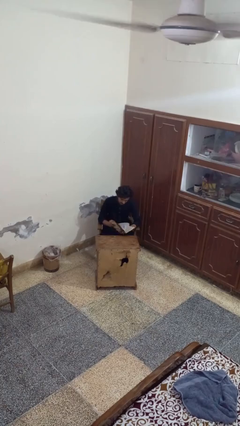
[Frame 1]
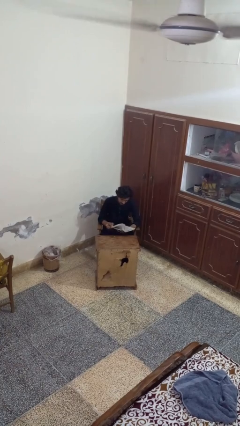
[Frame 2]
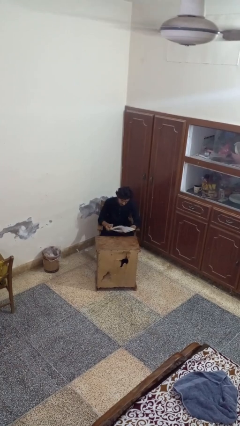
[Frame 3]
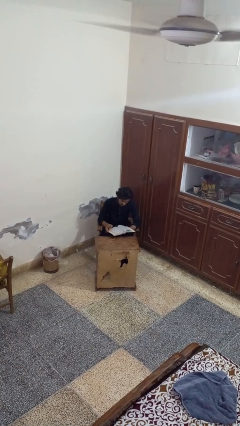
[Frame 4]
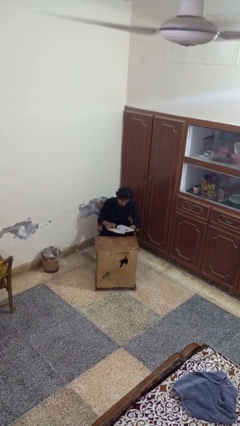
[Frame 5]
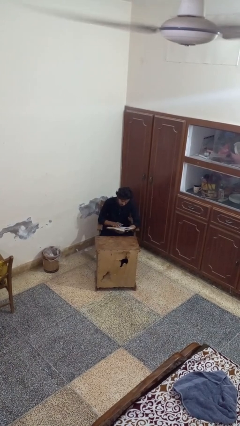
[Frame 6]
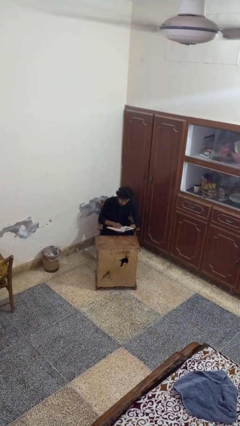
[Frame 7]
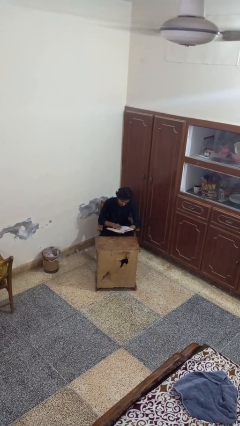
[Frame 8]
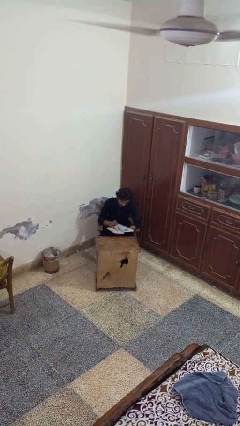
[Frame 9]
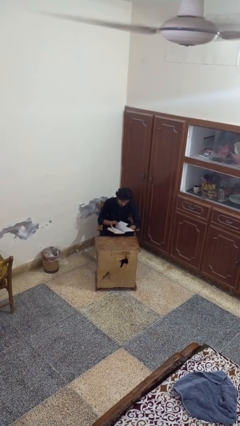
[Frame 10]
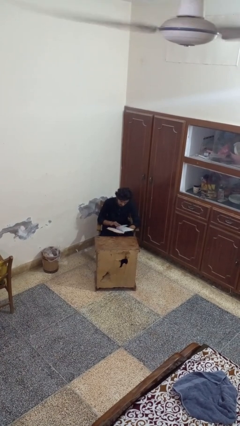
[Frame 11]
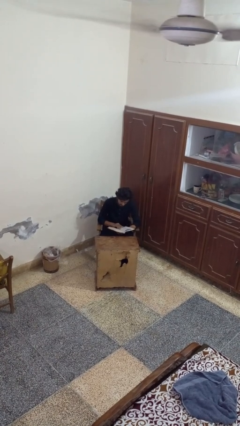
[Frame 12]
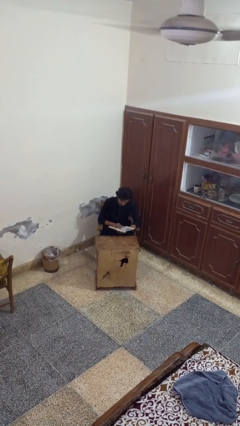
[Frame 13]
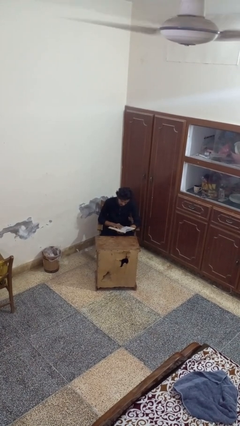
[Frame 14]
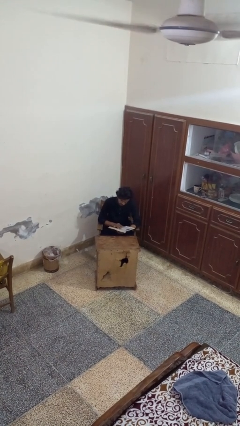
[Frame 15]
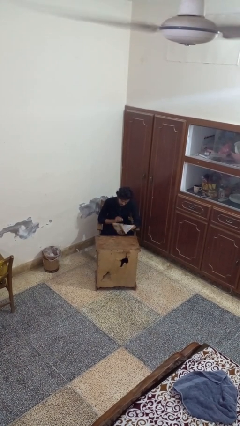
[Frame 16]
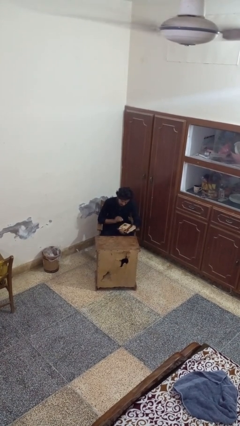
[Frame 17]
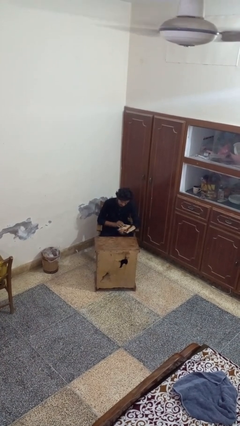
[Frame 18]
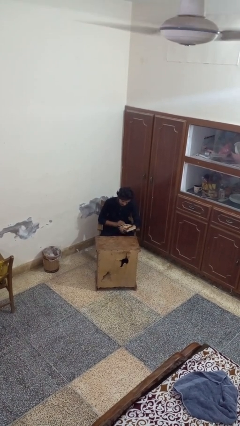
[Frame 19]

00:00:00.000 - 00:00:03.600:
person reads book

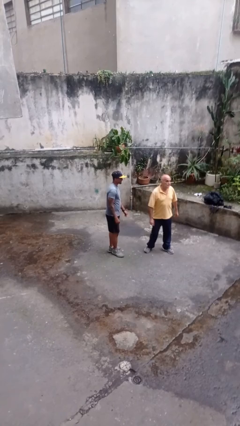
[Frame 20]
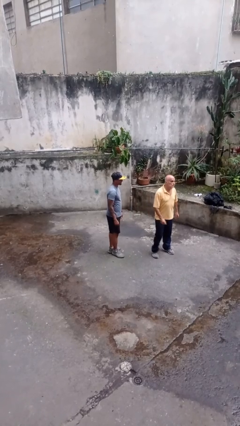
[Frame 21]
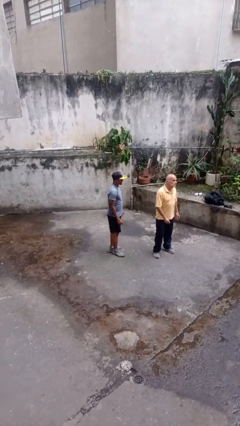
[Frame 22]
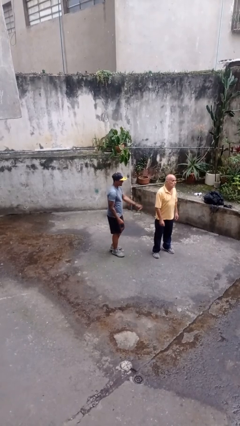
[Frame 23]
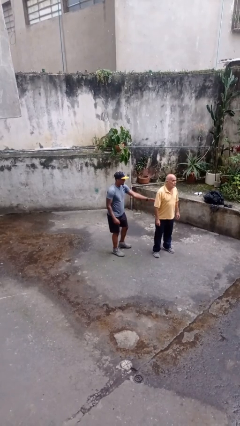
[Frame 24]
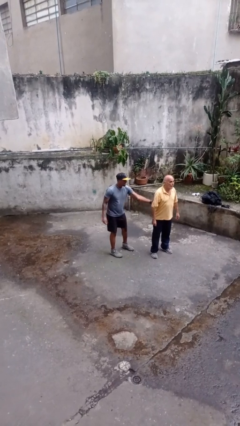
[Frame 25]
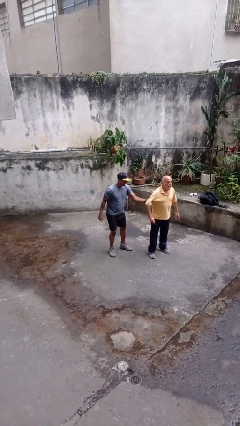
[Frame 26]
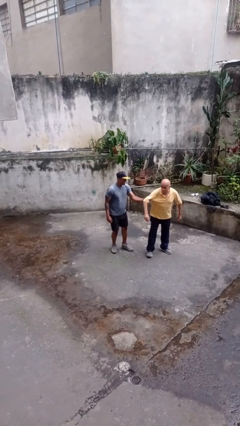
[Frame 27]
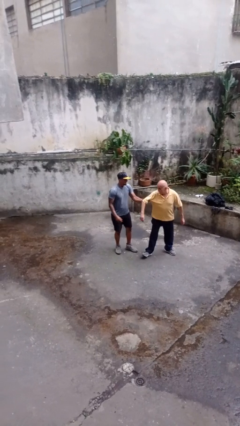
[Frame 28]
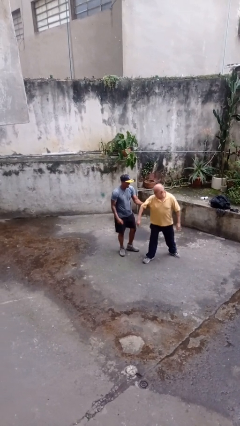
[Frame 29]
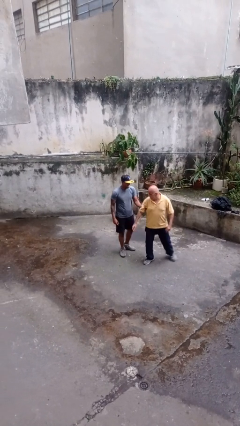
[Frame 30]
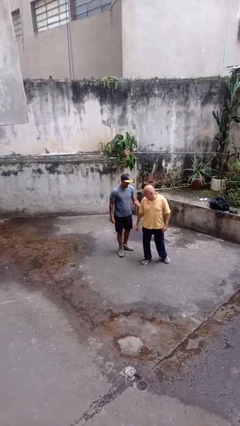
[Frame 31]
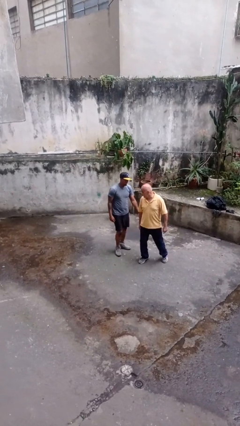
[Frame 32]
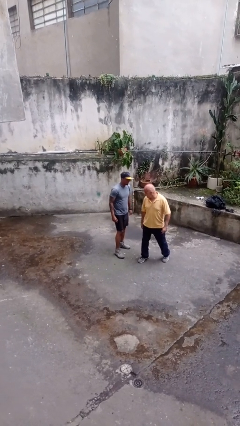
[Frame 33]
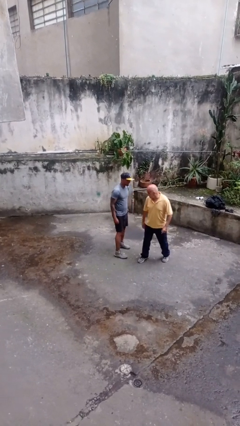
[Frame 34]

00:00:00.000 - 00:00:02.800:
person grabs person by bicep

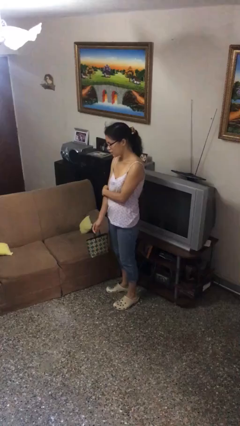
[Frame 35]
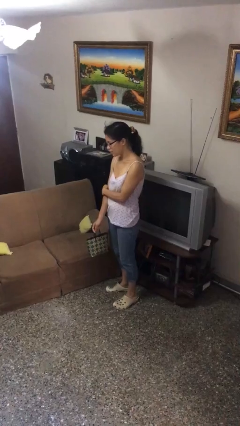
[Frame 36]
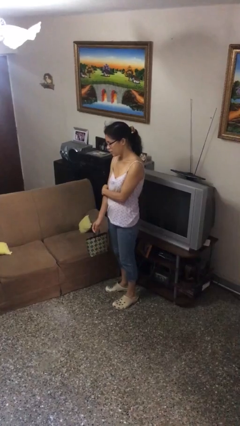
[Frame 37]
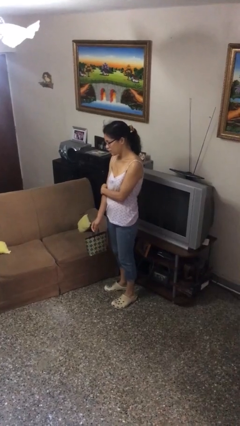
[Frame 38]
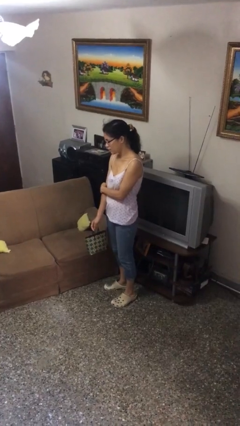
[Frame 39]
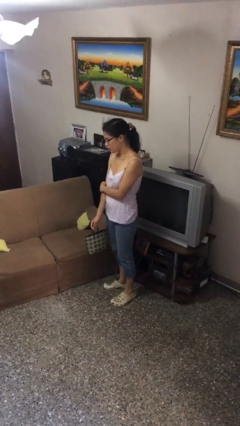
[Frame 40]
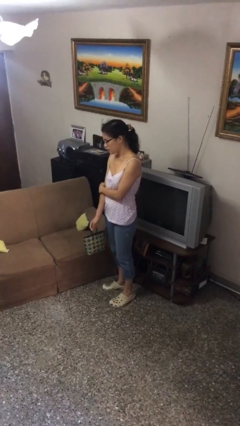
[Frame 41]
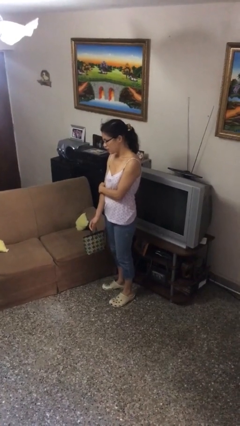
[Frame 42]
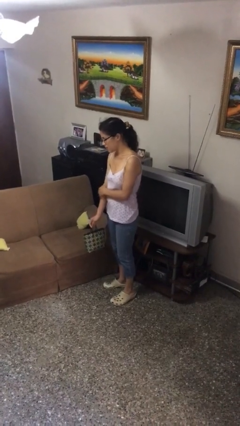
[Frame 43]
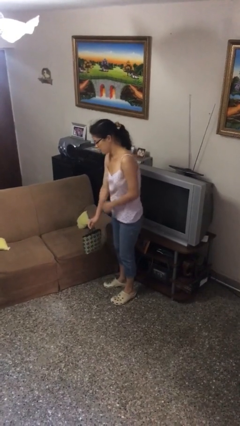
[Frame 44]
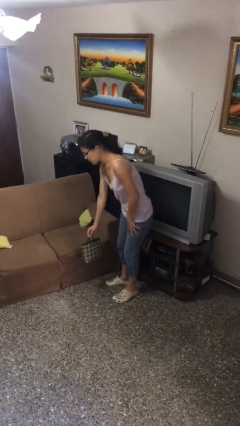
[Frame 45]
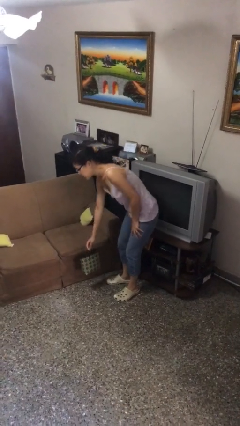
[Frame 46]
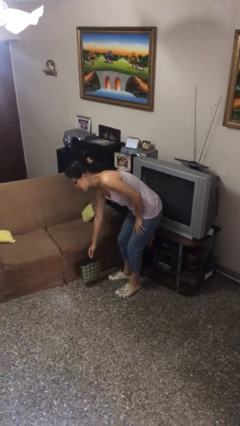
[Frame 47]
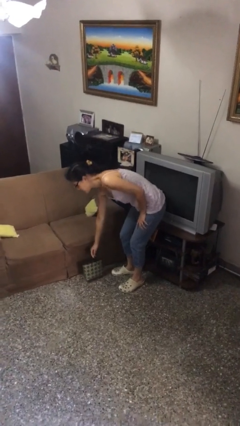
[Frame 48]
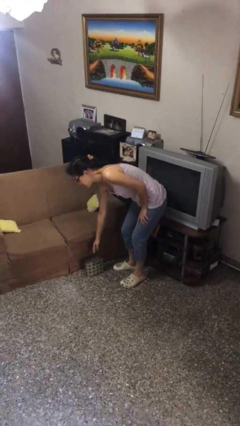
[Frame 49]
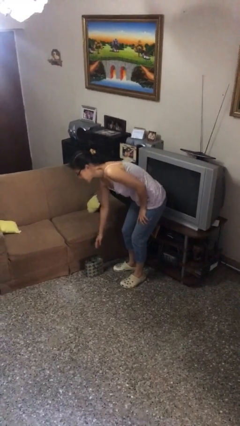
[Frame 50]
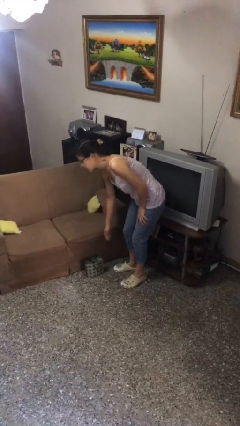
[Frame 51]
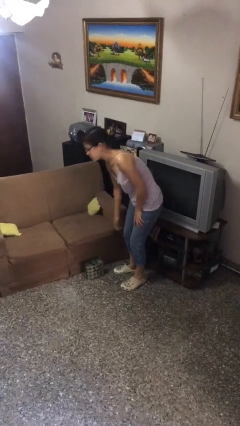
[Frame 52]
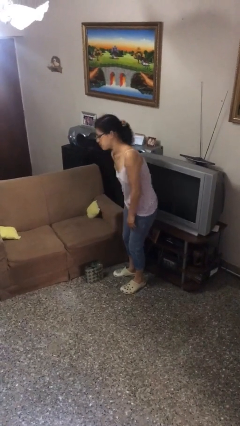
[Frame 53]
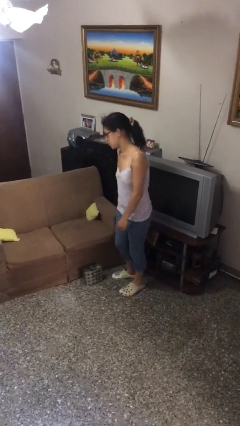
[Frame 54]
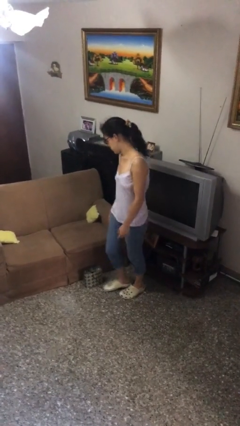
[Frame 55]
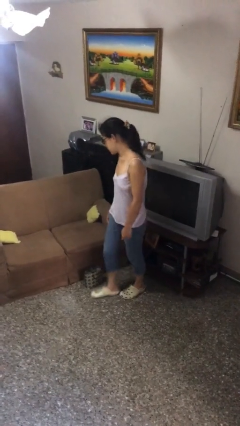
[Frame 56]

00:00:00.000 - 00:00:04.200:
person puts down object on floor

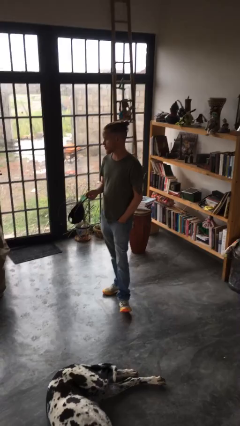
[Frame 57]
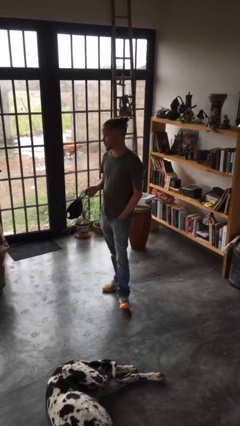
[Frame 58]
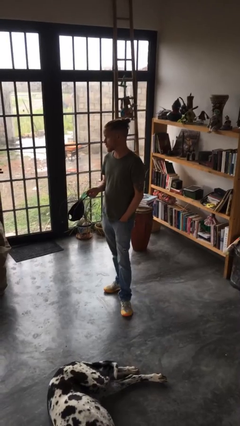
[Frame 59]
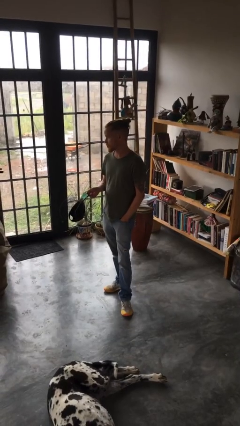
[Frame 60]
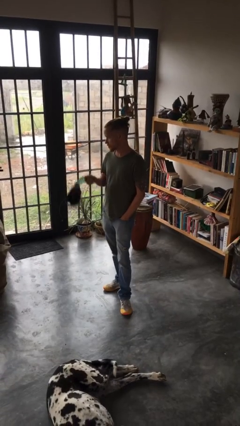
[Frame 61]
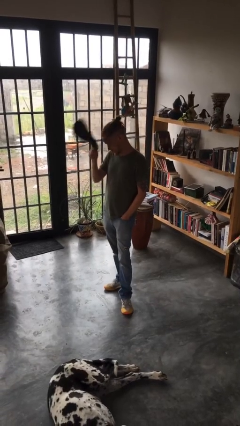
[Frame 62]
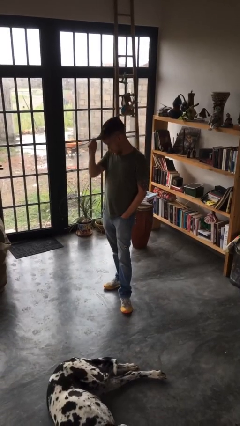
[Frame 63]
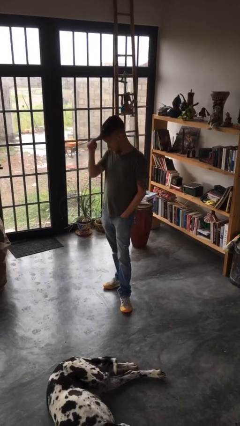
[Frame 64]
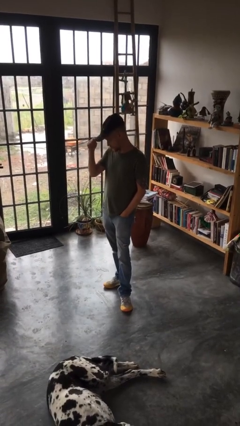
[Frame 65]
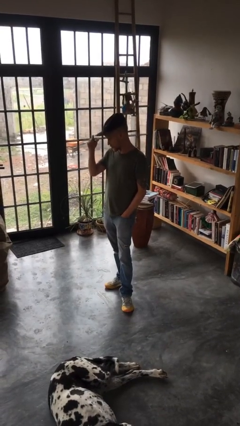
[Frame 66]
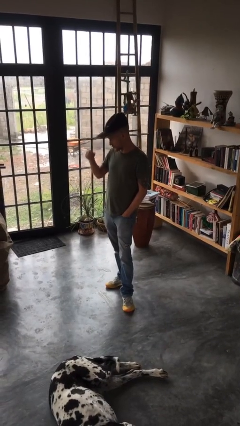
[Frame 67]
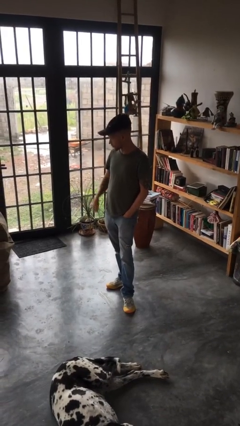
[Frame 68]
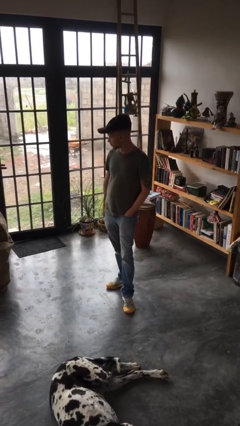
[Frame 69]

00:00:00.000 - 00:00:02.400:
person puts on hat

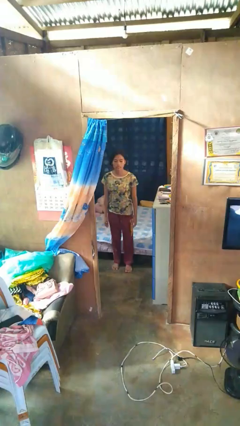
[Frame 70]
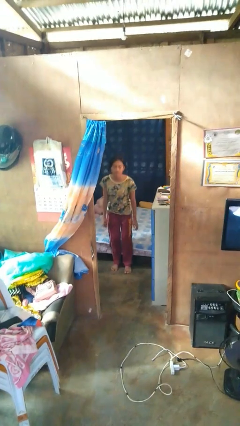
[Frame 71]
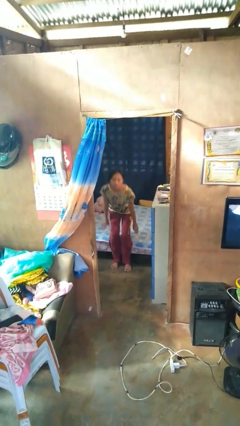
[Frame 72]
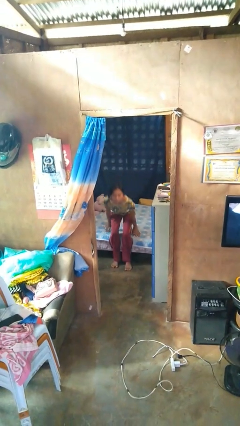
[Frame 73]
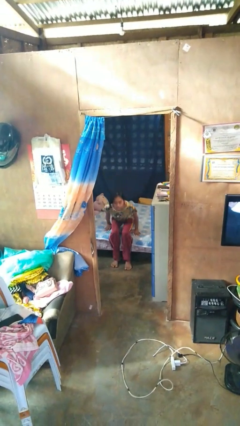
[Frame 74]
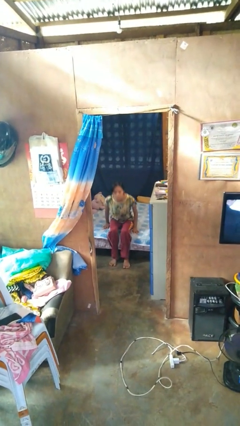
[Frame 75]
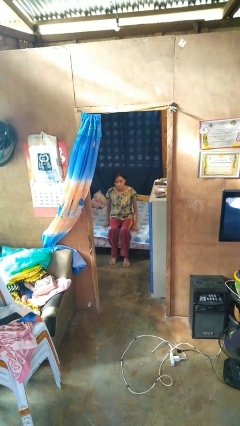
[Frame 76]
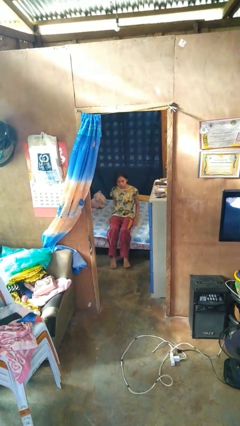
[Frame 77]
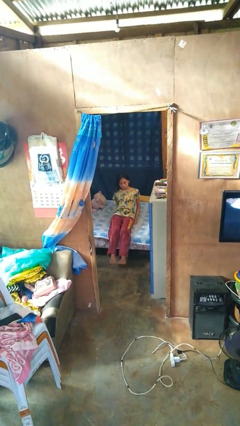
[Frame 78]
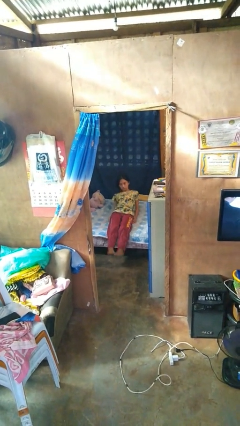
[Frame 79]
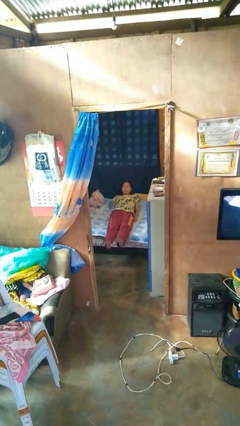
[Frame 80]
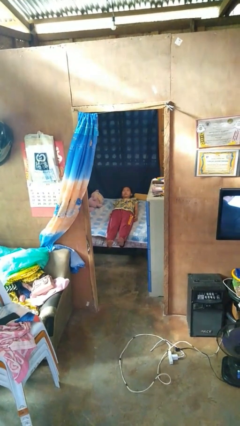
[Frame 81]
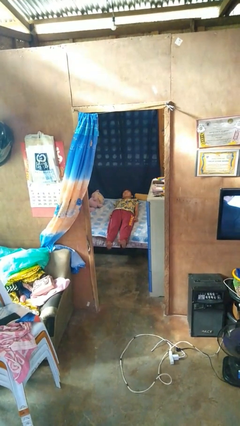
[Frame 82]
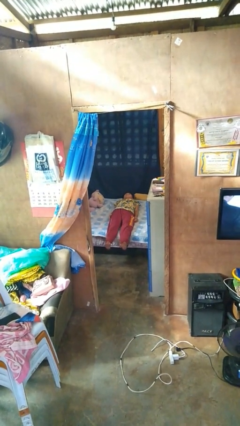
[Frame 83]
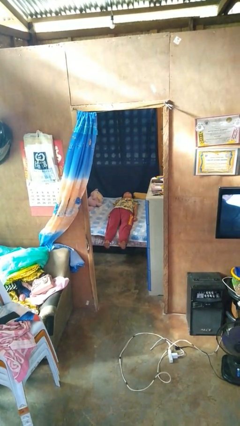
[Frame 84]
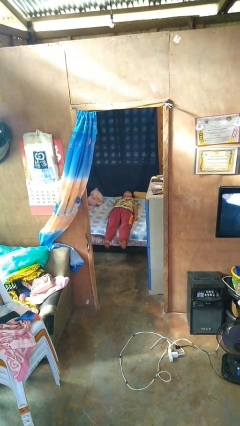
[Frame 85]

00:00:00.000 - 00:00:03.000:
person lies down on bed
